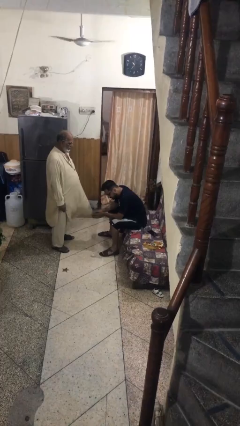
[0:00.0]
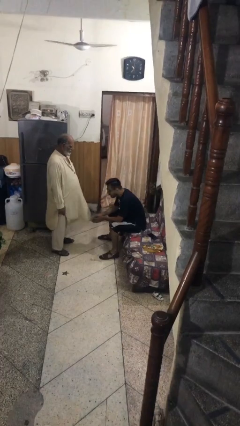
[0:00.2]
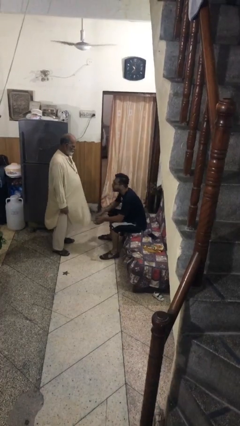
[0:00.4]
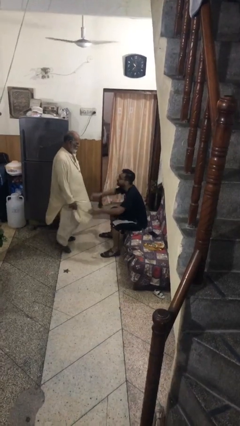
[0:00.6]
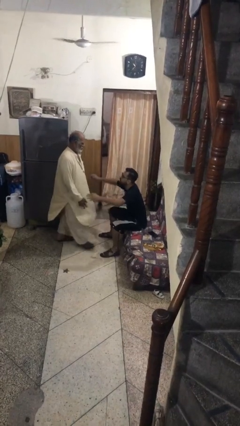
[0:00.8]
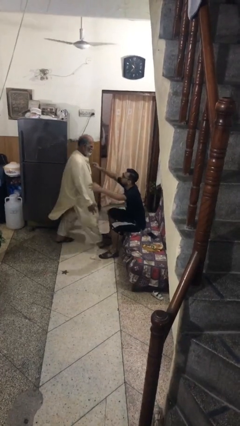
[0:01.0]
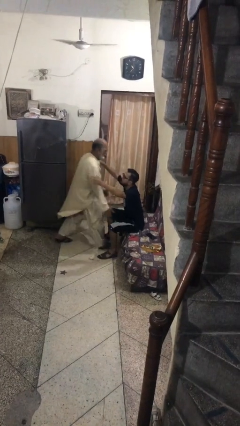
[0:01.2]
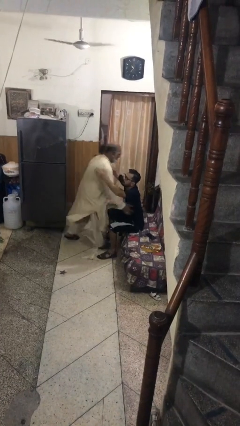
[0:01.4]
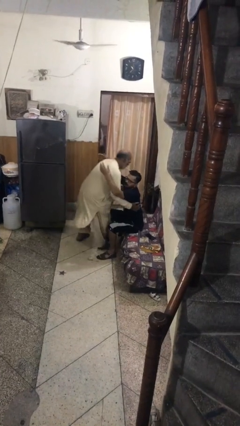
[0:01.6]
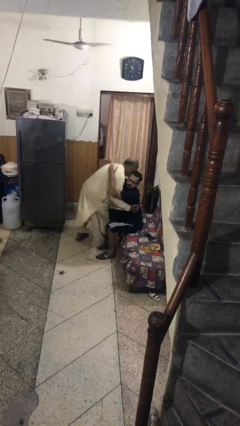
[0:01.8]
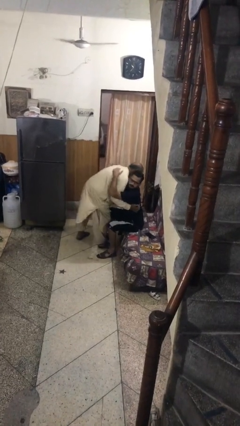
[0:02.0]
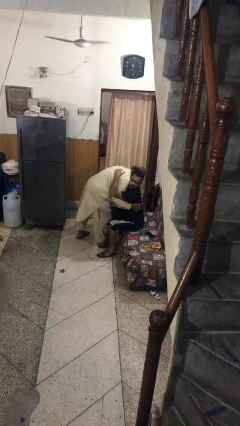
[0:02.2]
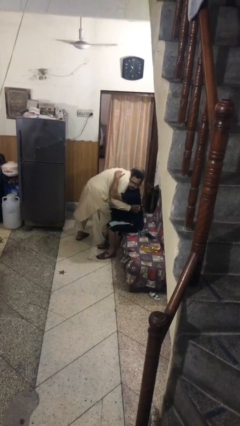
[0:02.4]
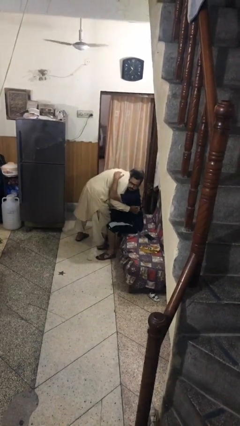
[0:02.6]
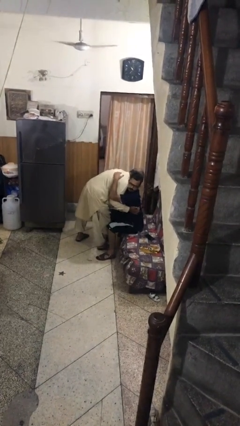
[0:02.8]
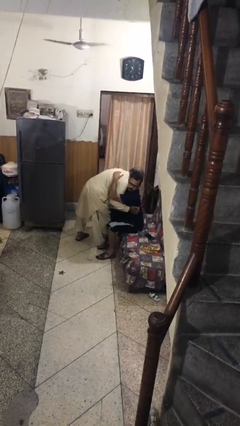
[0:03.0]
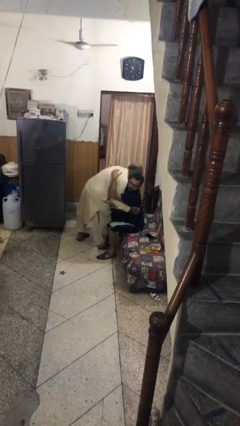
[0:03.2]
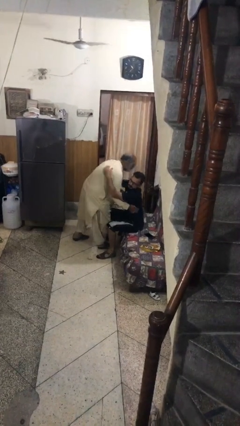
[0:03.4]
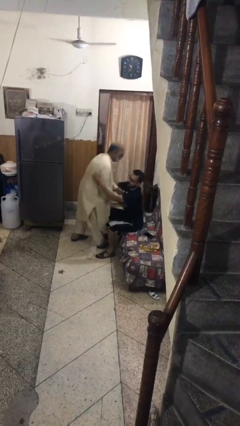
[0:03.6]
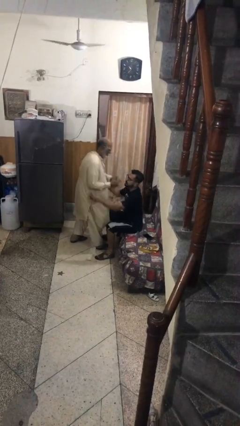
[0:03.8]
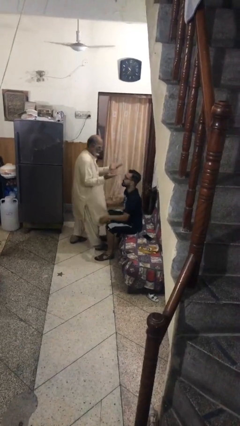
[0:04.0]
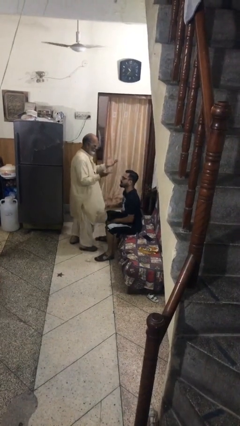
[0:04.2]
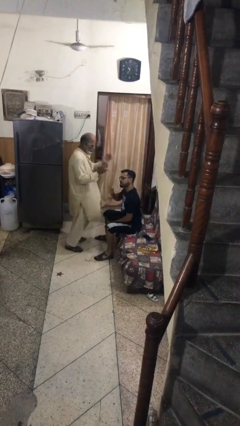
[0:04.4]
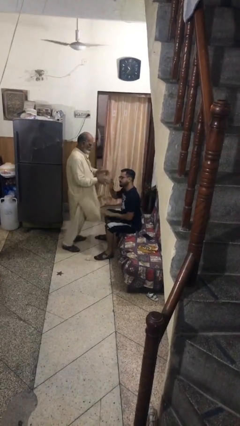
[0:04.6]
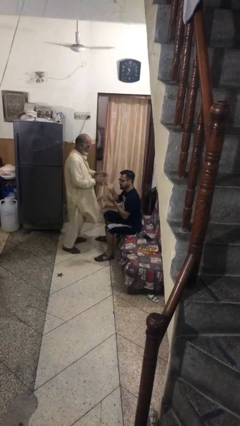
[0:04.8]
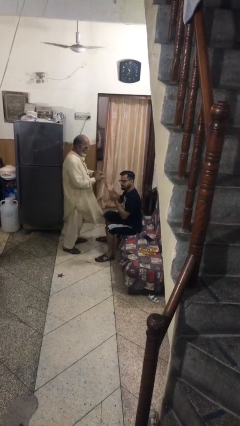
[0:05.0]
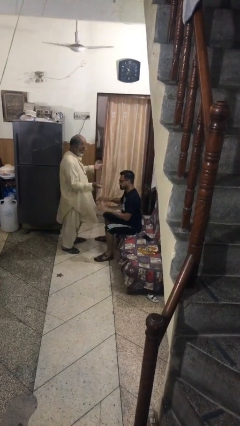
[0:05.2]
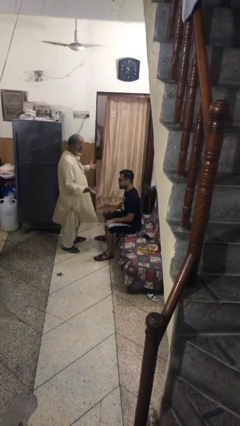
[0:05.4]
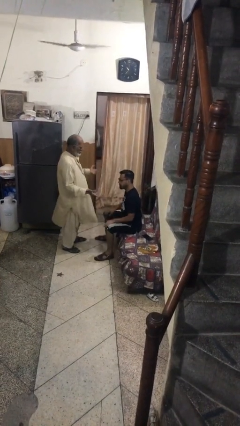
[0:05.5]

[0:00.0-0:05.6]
person embraces person

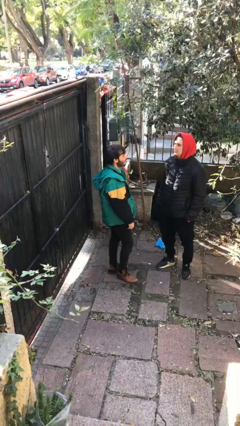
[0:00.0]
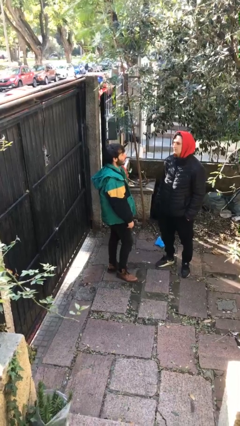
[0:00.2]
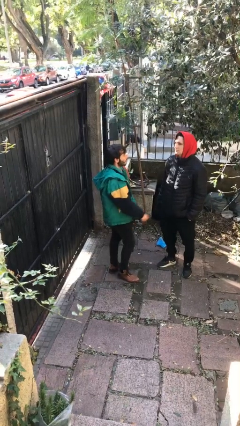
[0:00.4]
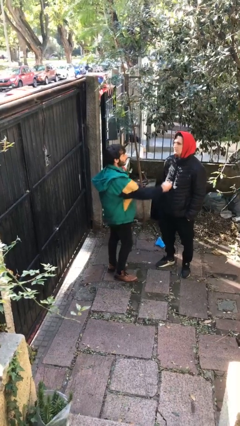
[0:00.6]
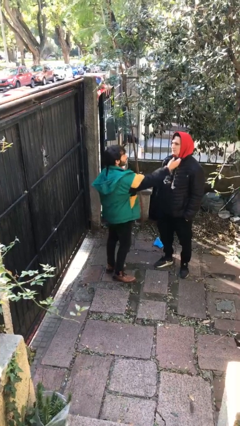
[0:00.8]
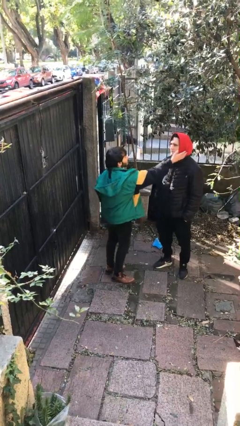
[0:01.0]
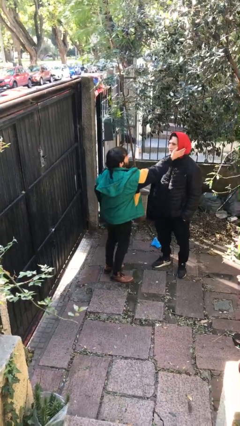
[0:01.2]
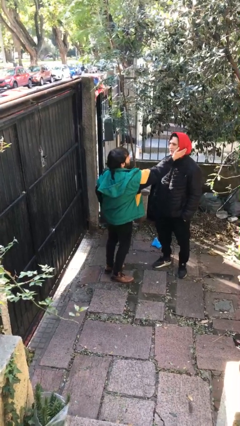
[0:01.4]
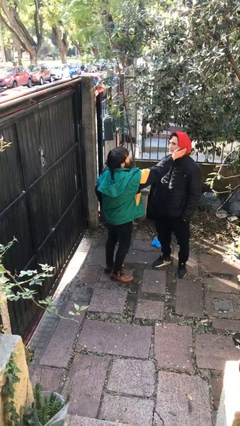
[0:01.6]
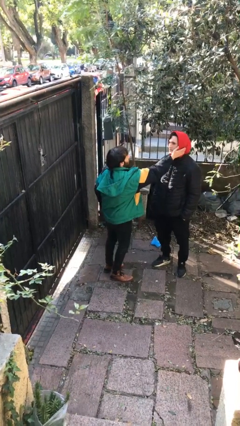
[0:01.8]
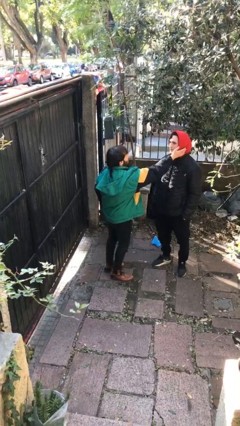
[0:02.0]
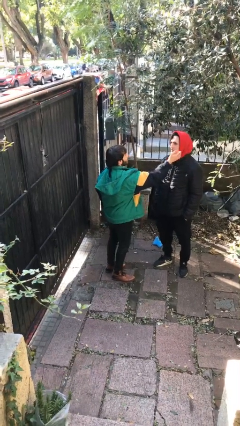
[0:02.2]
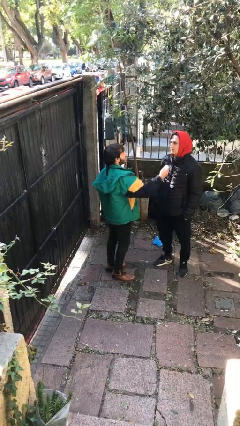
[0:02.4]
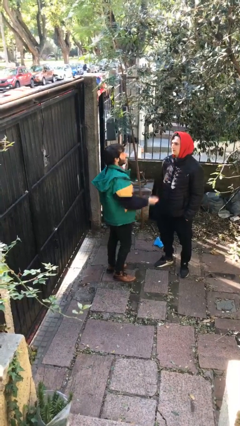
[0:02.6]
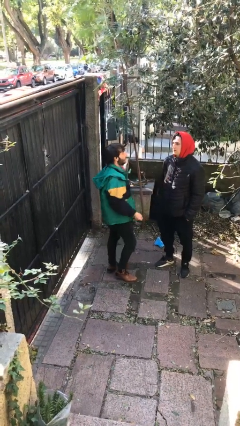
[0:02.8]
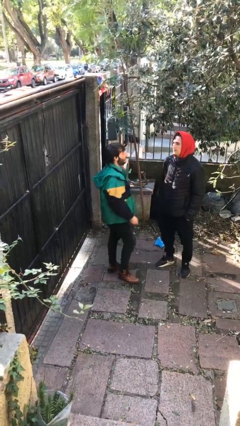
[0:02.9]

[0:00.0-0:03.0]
person touches face of person

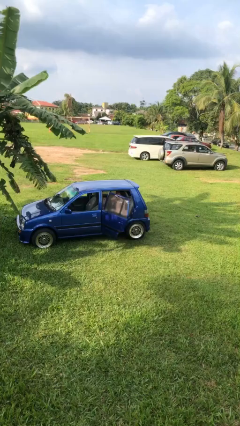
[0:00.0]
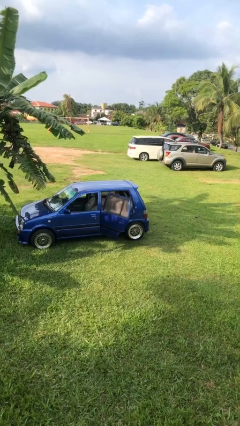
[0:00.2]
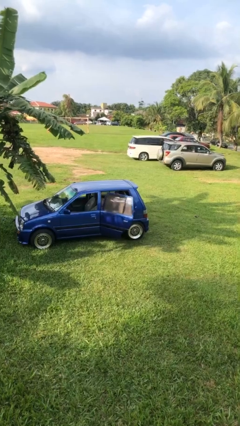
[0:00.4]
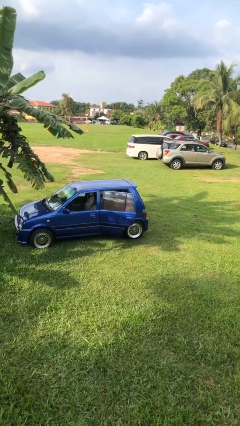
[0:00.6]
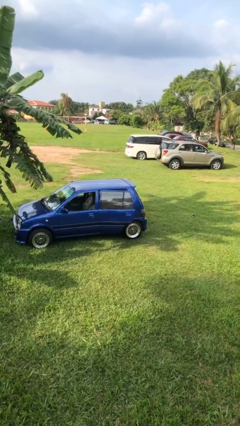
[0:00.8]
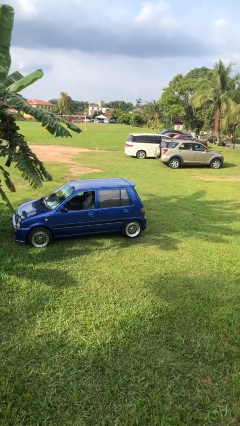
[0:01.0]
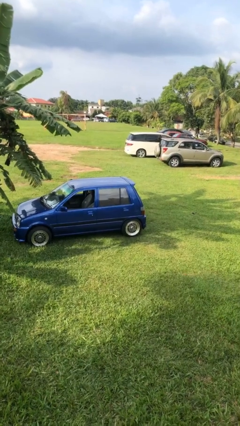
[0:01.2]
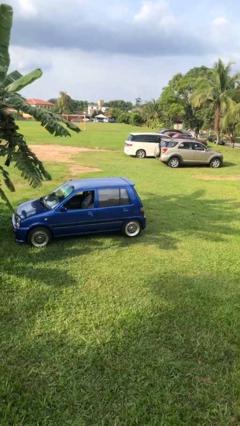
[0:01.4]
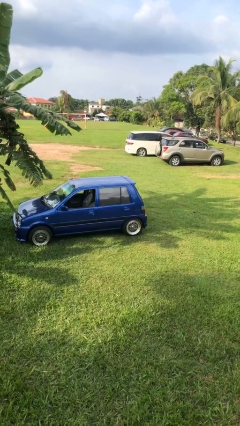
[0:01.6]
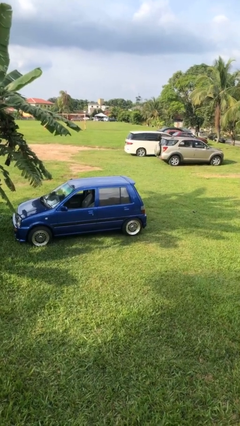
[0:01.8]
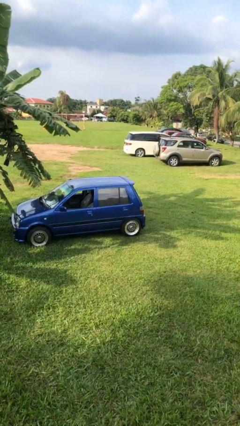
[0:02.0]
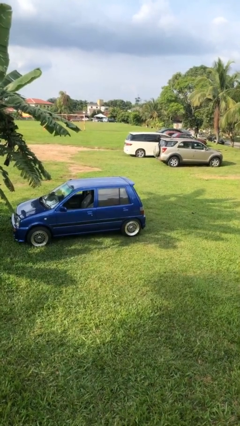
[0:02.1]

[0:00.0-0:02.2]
person closes car door

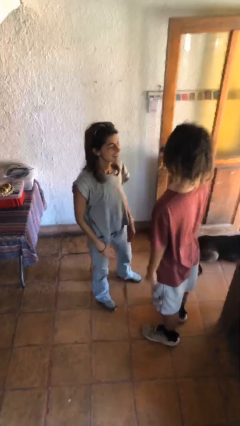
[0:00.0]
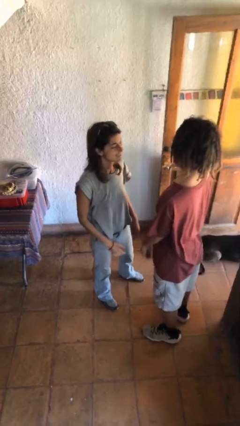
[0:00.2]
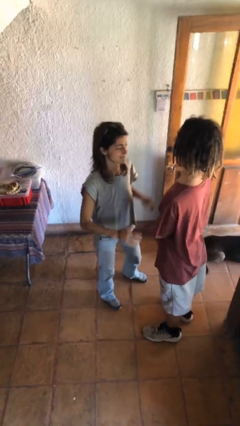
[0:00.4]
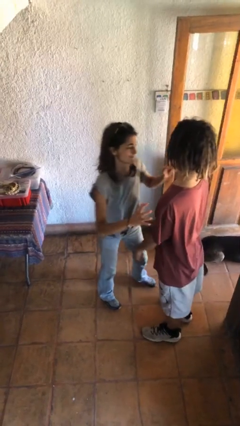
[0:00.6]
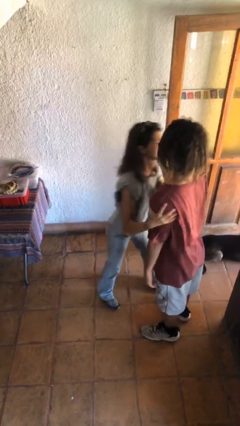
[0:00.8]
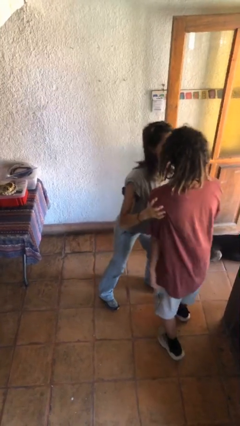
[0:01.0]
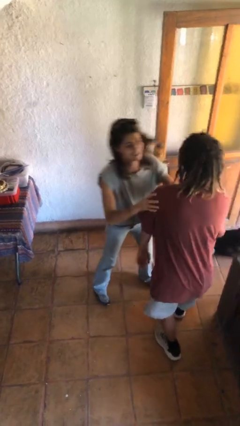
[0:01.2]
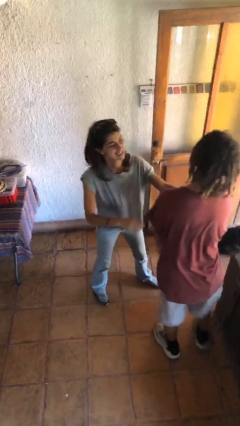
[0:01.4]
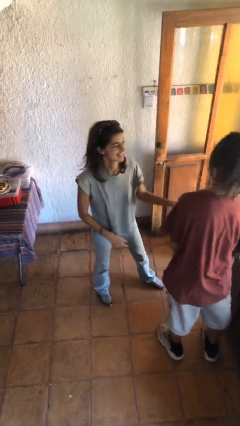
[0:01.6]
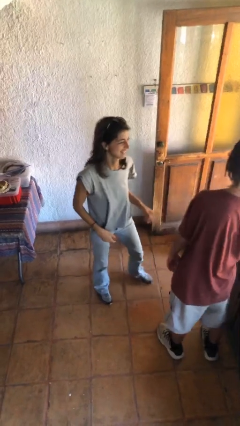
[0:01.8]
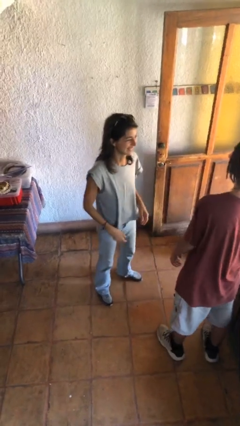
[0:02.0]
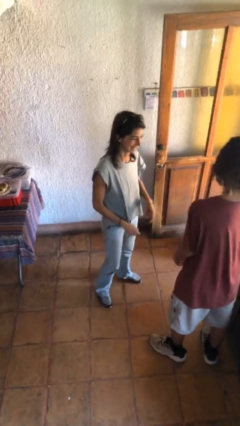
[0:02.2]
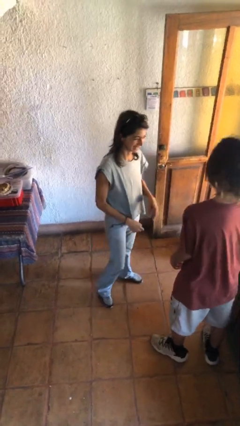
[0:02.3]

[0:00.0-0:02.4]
person shoves person

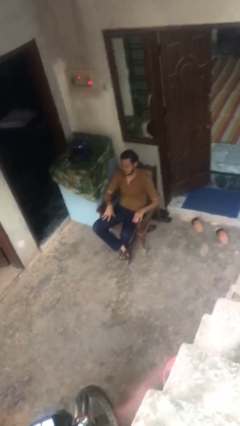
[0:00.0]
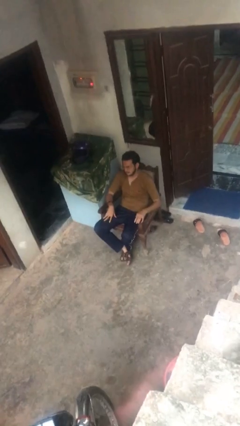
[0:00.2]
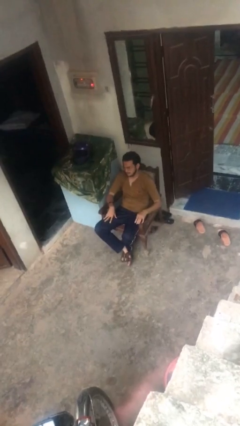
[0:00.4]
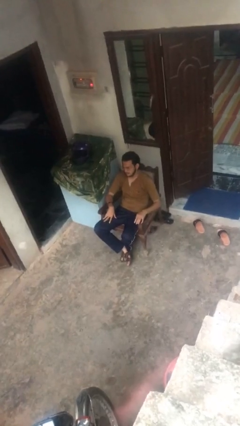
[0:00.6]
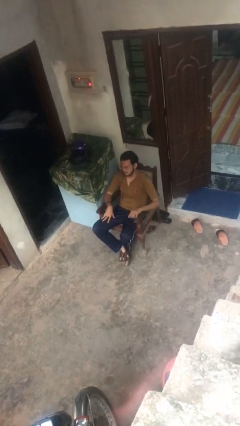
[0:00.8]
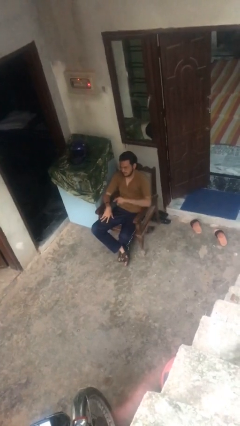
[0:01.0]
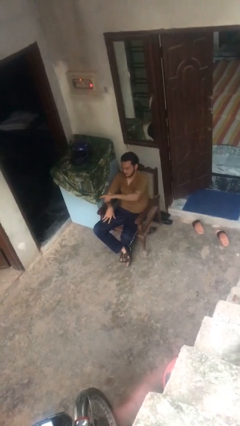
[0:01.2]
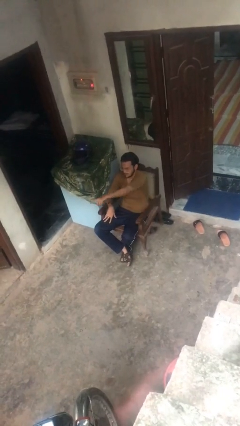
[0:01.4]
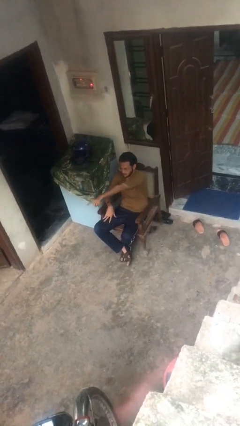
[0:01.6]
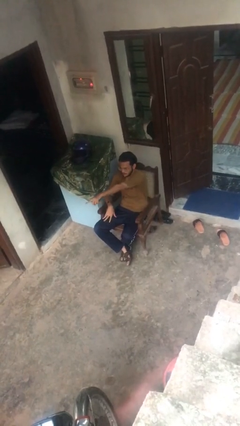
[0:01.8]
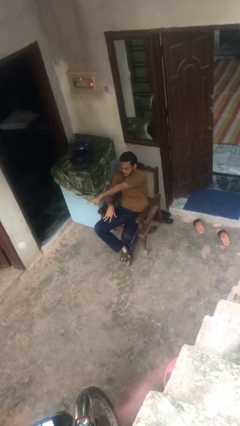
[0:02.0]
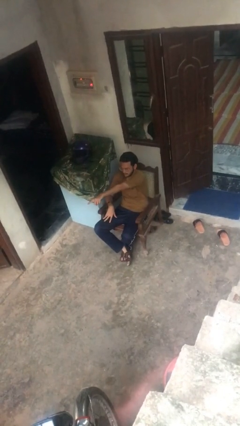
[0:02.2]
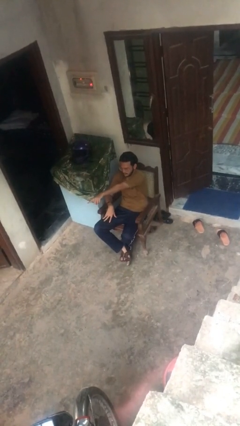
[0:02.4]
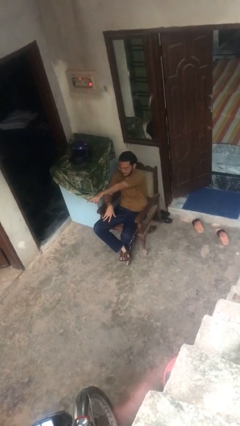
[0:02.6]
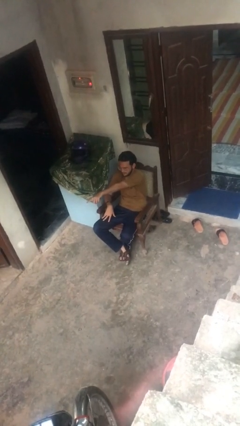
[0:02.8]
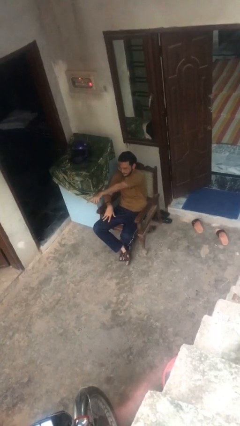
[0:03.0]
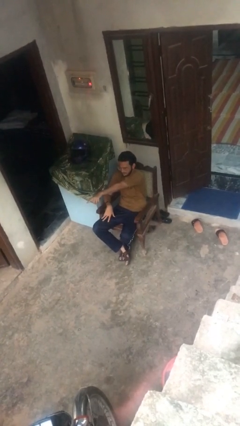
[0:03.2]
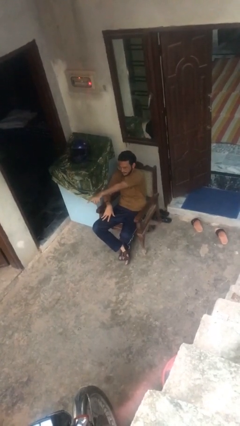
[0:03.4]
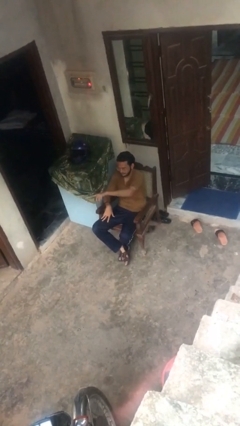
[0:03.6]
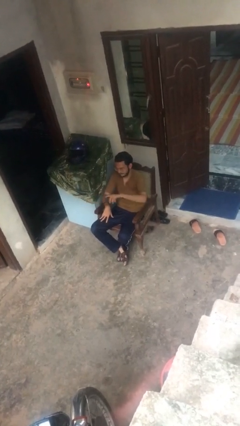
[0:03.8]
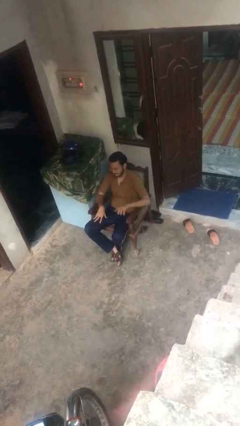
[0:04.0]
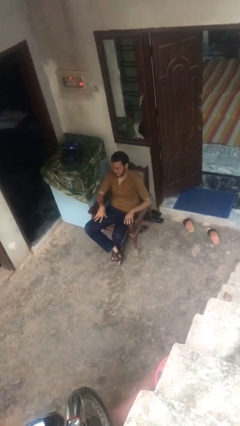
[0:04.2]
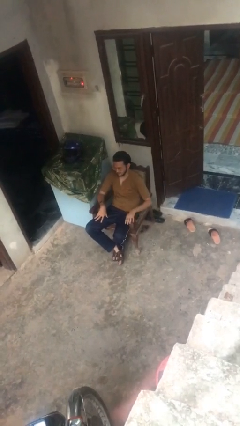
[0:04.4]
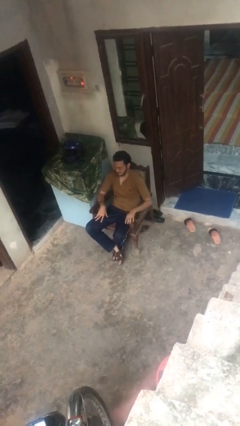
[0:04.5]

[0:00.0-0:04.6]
person points at person
